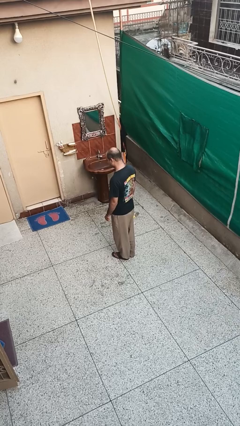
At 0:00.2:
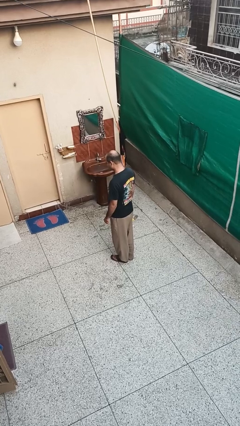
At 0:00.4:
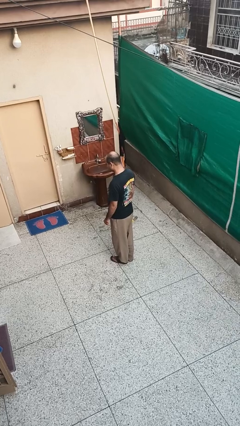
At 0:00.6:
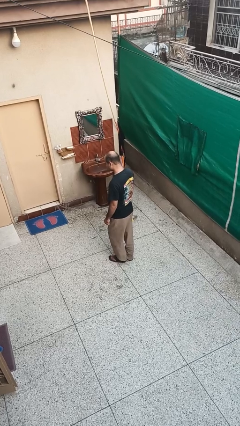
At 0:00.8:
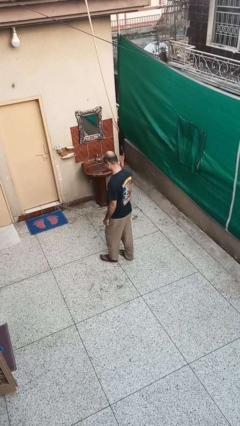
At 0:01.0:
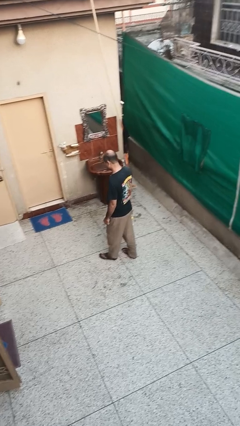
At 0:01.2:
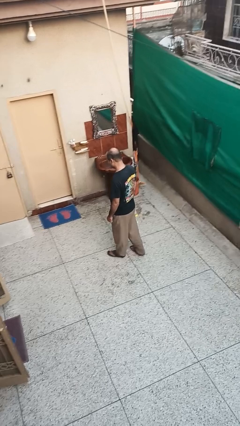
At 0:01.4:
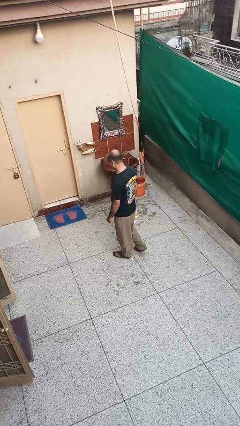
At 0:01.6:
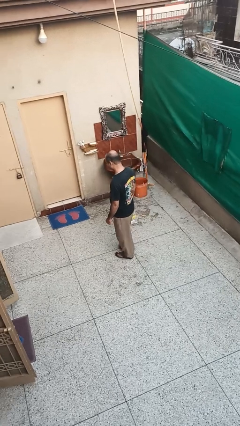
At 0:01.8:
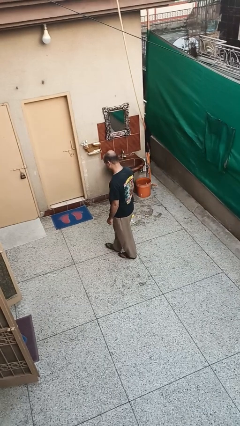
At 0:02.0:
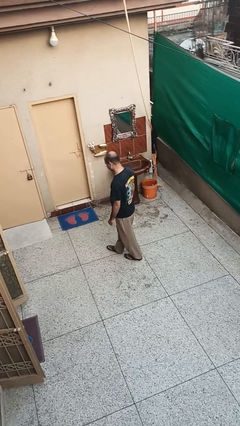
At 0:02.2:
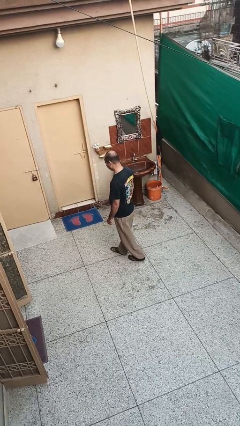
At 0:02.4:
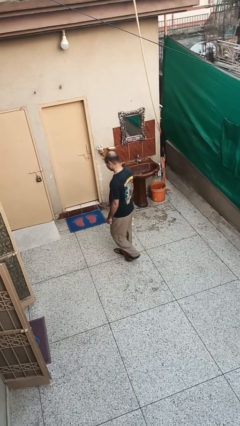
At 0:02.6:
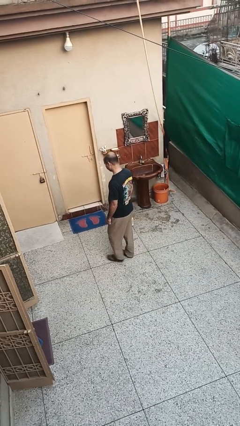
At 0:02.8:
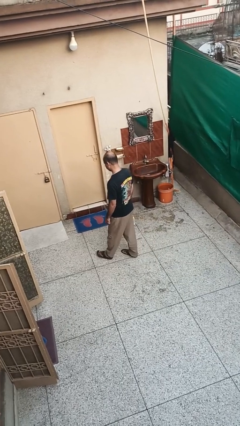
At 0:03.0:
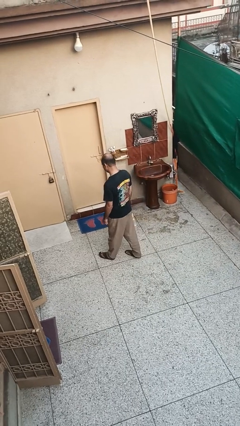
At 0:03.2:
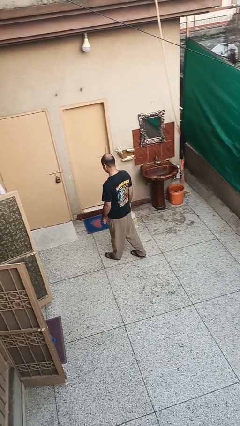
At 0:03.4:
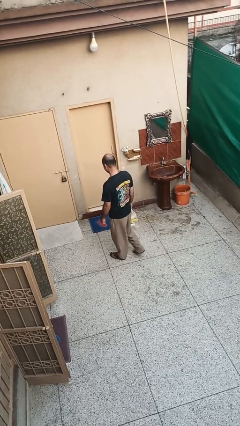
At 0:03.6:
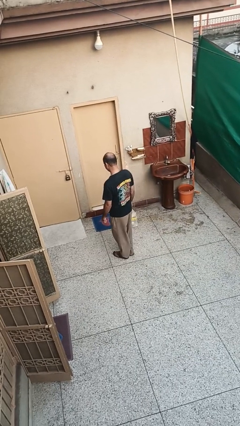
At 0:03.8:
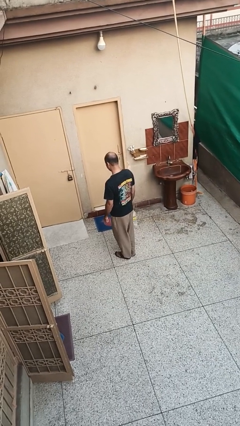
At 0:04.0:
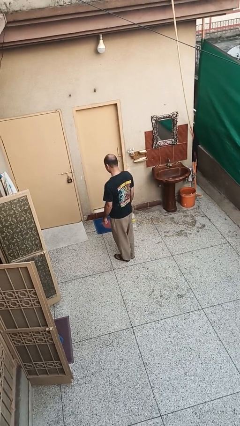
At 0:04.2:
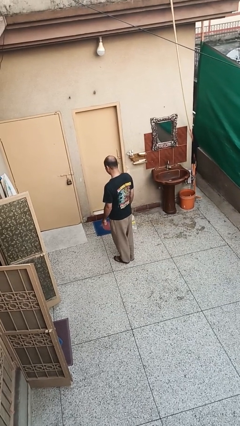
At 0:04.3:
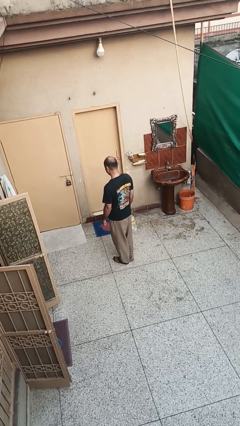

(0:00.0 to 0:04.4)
person carries groceries

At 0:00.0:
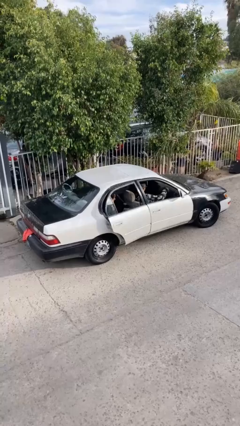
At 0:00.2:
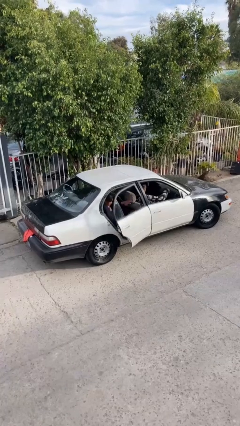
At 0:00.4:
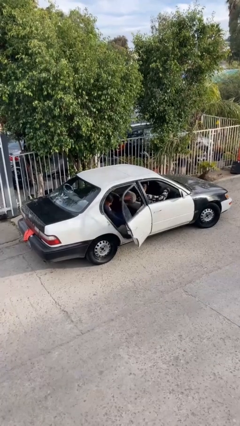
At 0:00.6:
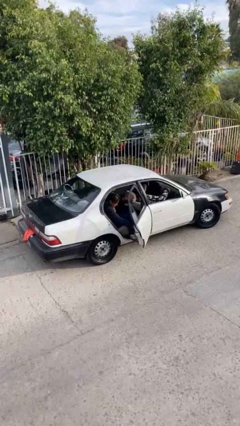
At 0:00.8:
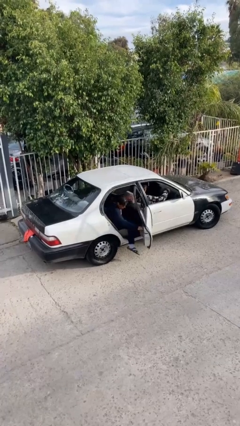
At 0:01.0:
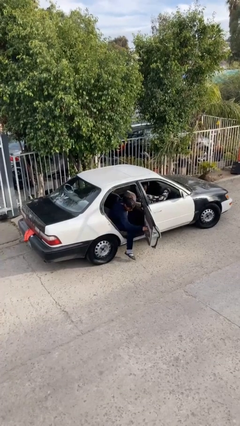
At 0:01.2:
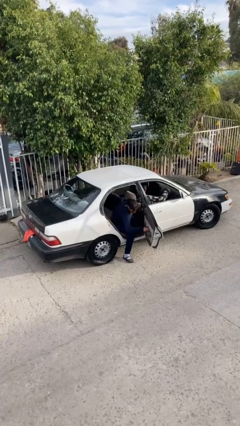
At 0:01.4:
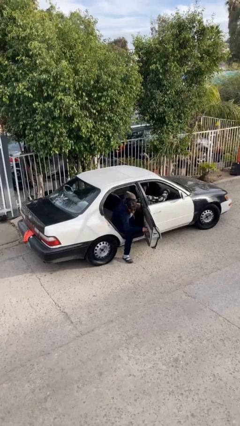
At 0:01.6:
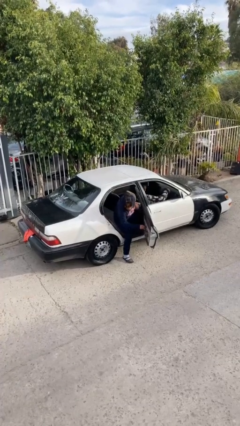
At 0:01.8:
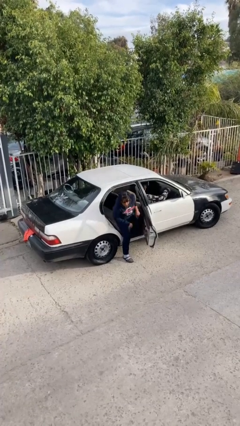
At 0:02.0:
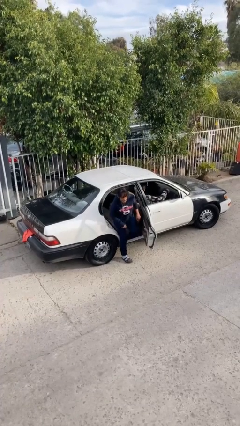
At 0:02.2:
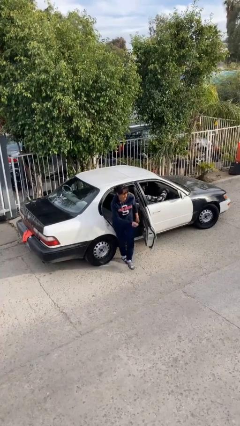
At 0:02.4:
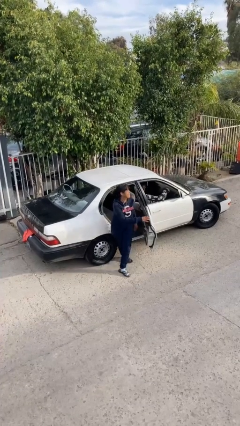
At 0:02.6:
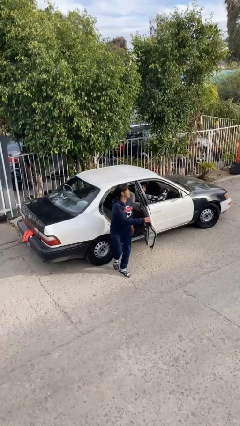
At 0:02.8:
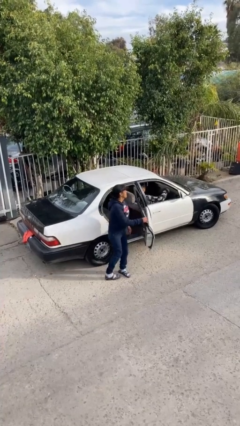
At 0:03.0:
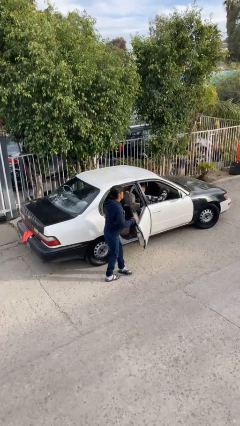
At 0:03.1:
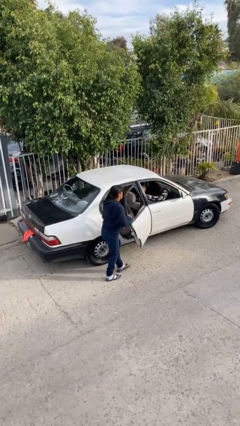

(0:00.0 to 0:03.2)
car drops off person

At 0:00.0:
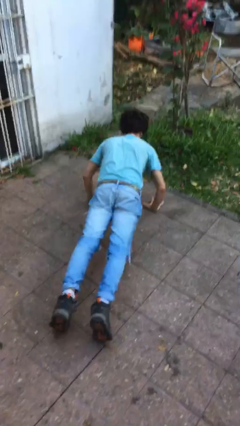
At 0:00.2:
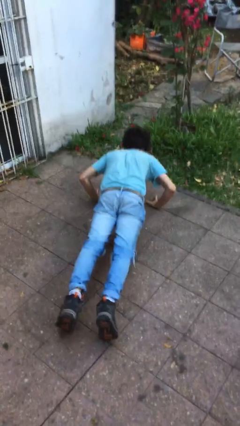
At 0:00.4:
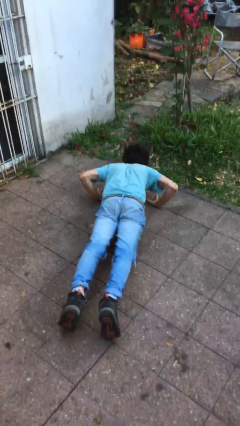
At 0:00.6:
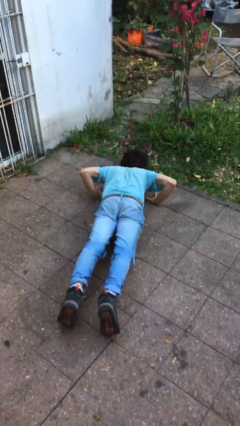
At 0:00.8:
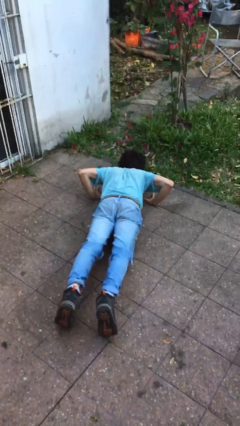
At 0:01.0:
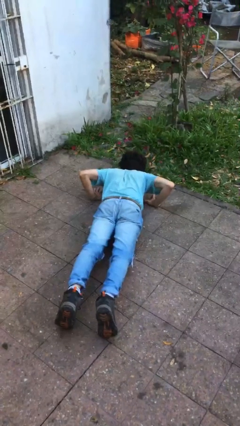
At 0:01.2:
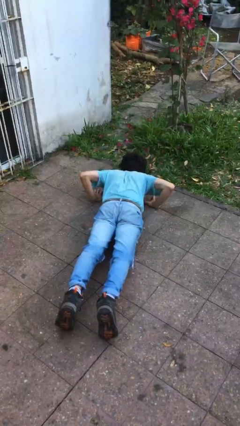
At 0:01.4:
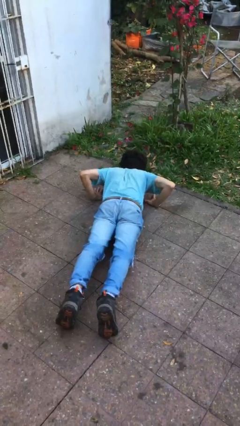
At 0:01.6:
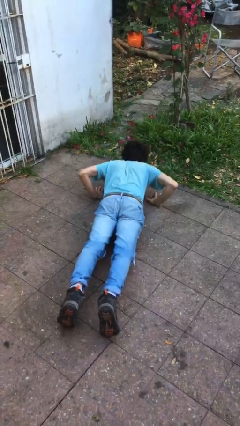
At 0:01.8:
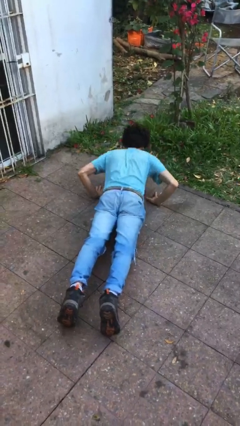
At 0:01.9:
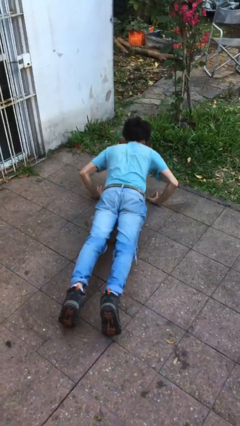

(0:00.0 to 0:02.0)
person exercises with pushup

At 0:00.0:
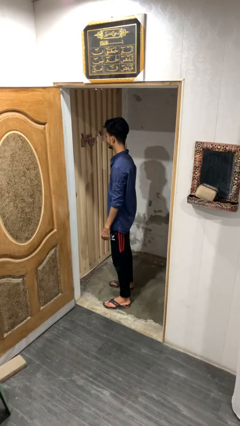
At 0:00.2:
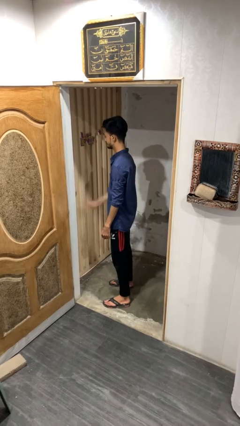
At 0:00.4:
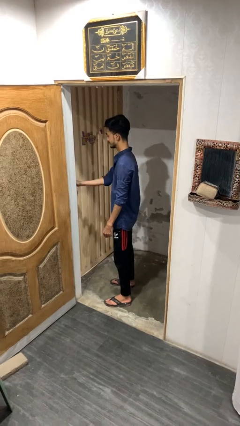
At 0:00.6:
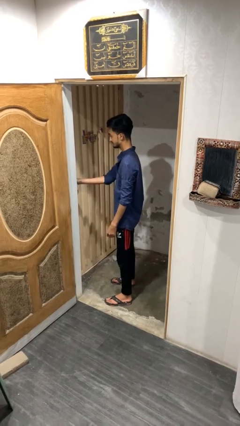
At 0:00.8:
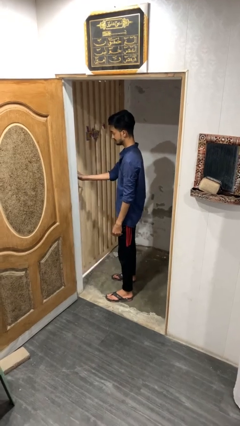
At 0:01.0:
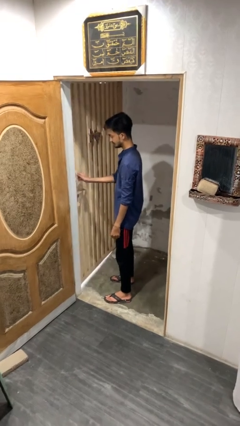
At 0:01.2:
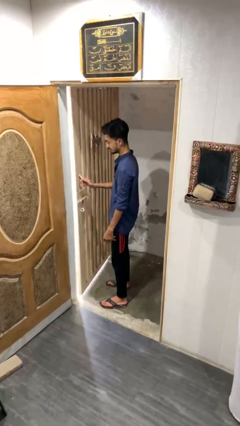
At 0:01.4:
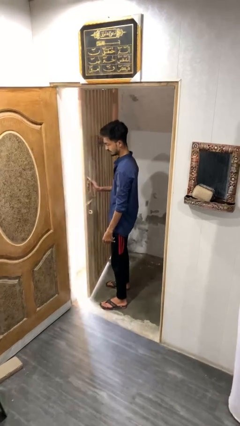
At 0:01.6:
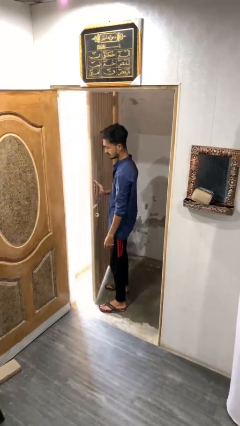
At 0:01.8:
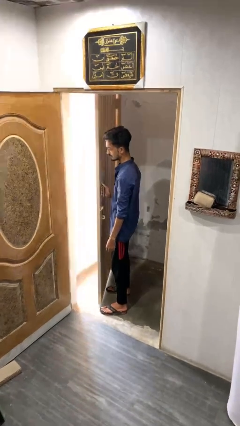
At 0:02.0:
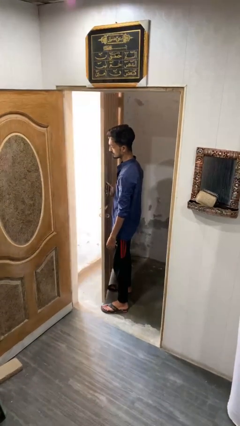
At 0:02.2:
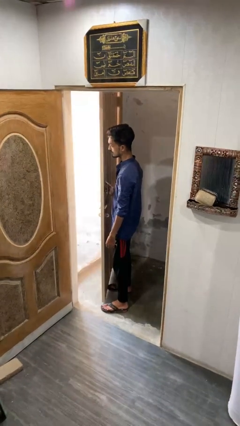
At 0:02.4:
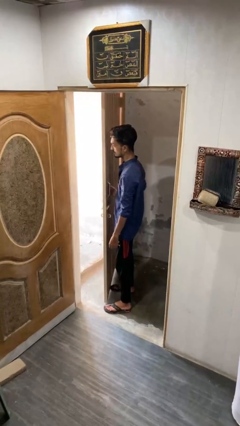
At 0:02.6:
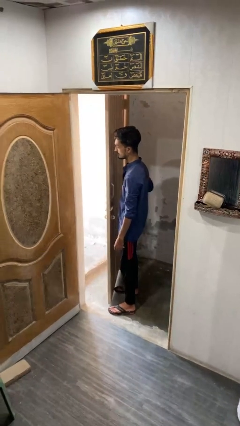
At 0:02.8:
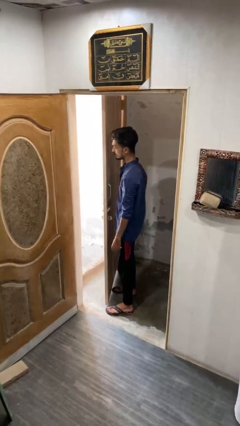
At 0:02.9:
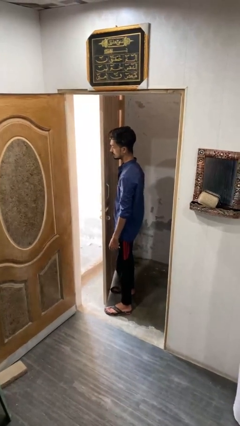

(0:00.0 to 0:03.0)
person opens gate

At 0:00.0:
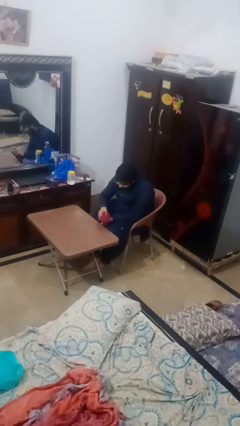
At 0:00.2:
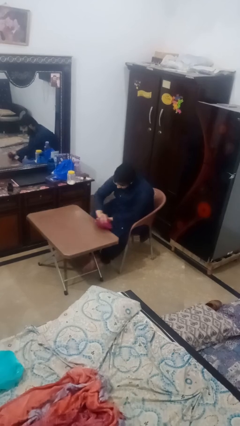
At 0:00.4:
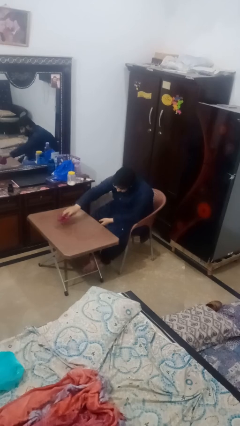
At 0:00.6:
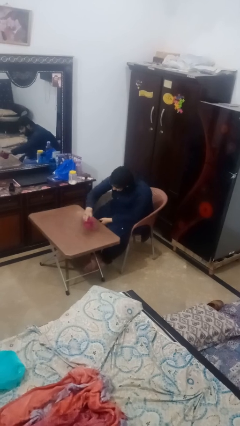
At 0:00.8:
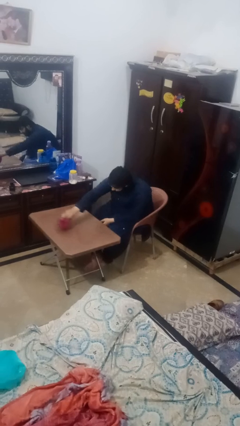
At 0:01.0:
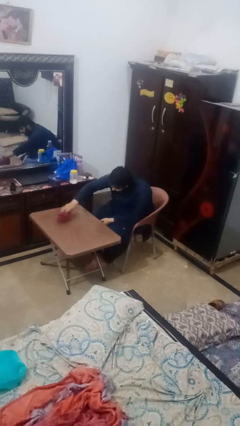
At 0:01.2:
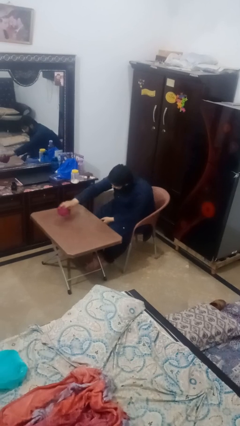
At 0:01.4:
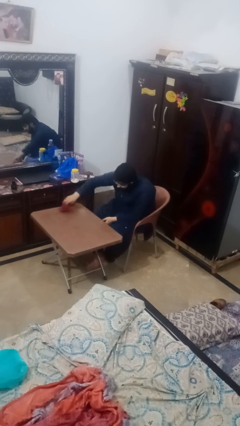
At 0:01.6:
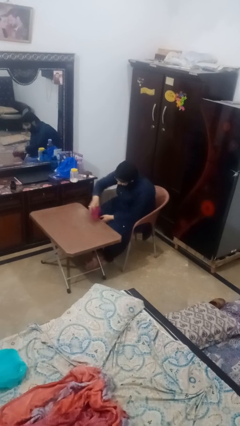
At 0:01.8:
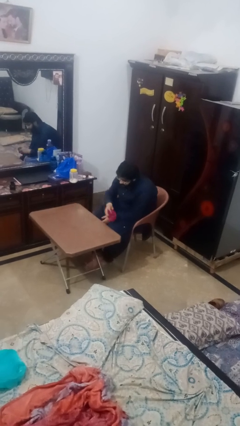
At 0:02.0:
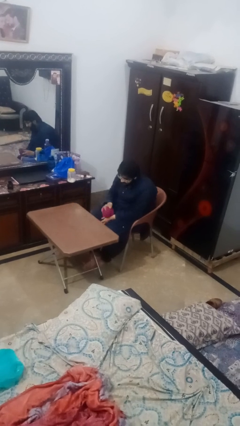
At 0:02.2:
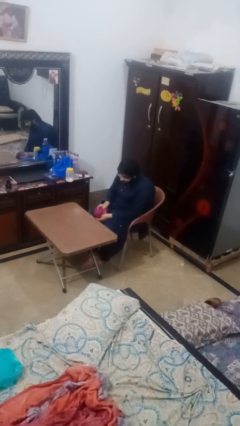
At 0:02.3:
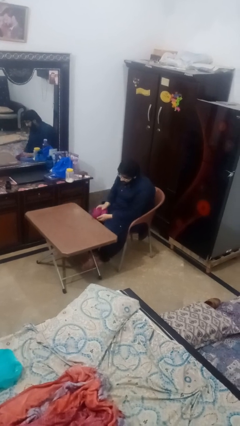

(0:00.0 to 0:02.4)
person cleans table with rag

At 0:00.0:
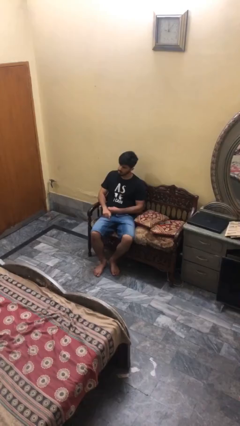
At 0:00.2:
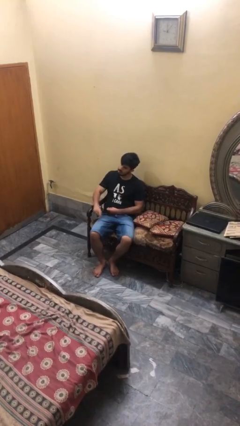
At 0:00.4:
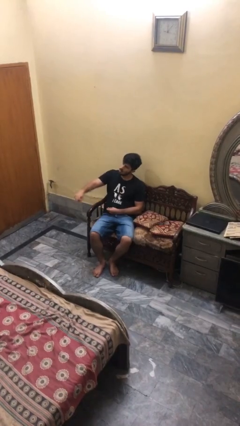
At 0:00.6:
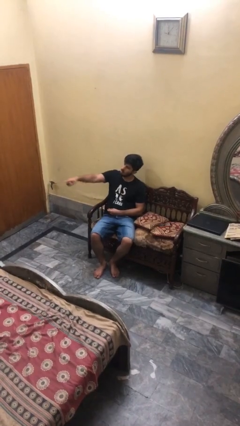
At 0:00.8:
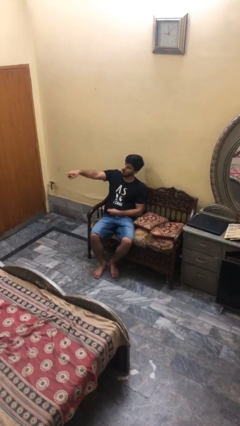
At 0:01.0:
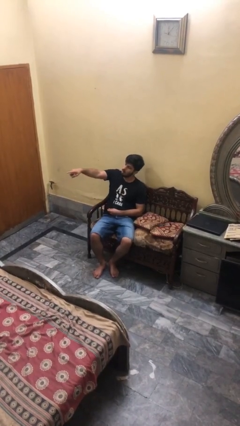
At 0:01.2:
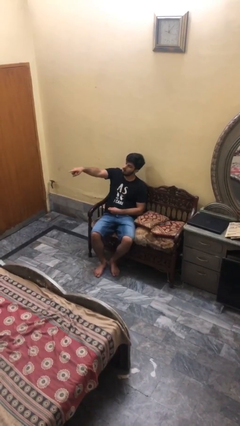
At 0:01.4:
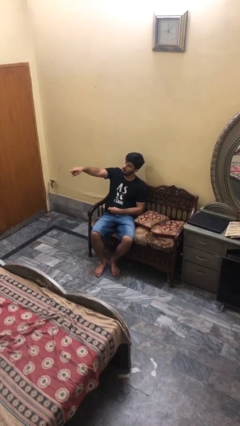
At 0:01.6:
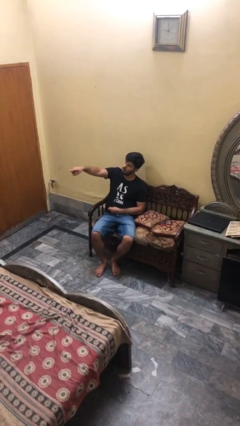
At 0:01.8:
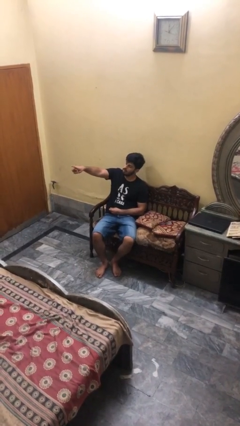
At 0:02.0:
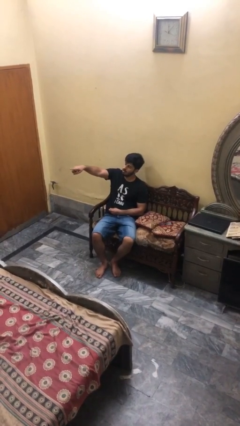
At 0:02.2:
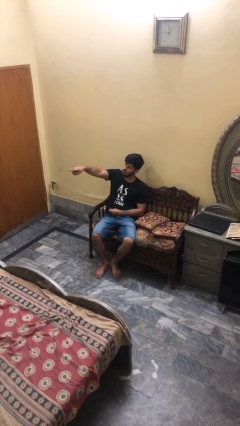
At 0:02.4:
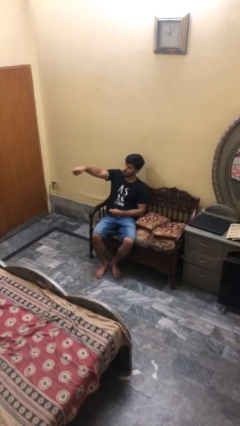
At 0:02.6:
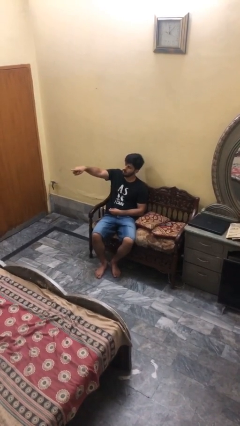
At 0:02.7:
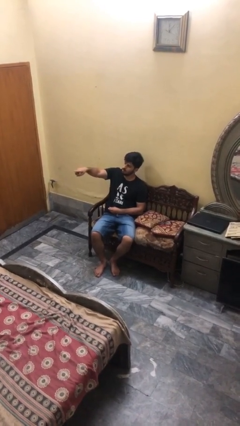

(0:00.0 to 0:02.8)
person points at person
